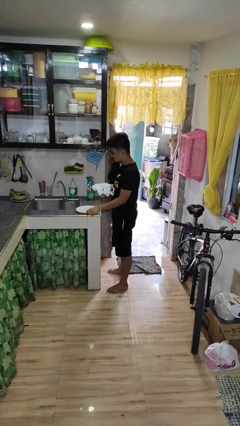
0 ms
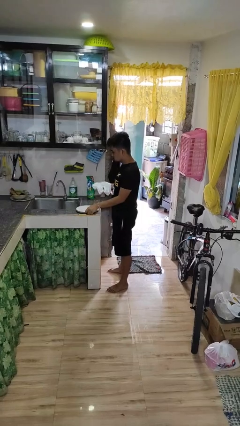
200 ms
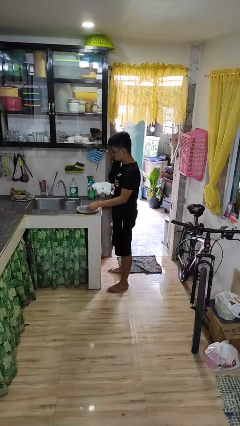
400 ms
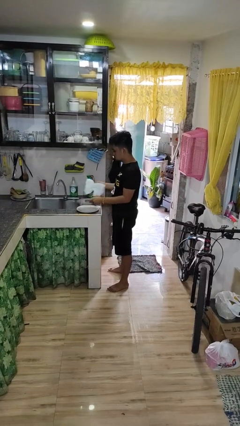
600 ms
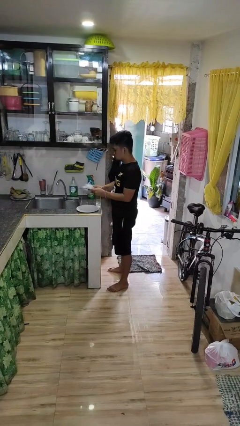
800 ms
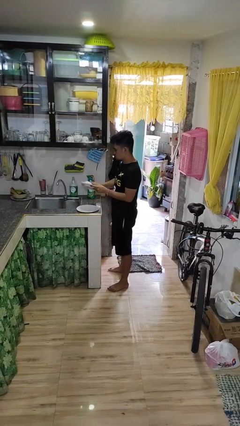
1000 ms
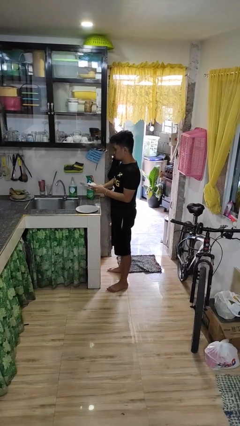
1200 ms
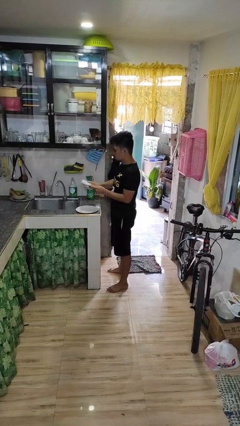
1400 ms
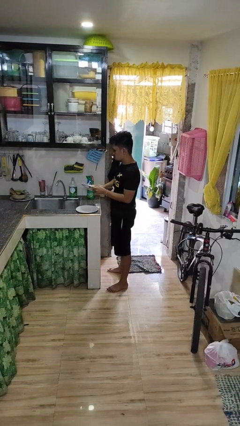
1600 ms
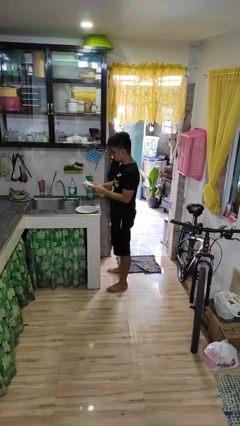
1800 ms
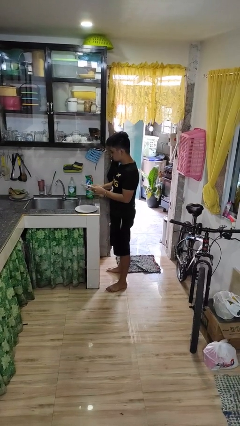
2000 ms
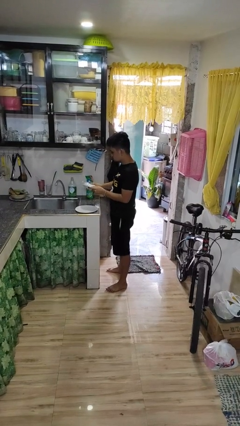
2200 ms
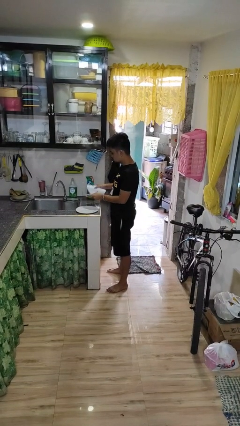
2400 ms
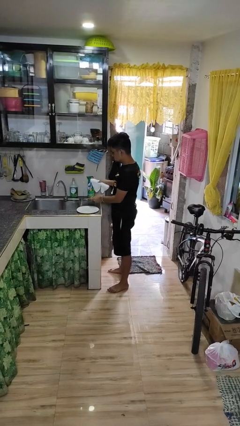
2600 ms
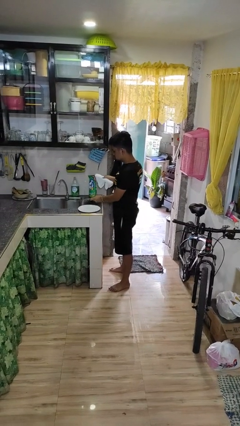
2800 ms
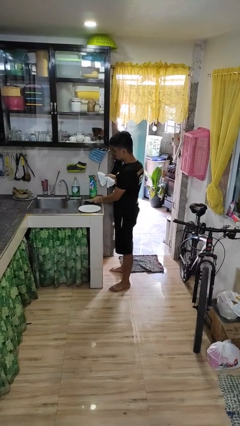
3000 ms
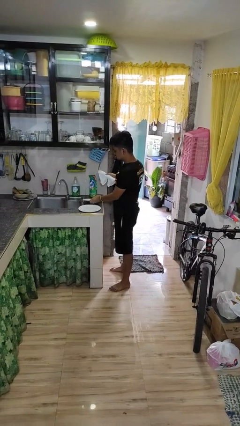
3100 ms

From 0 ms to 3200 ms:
person dries dish

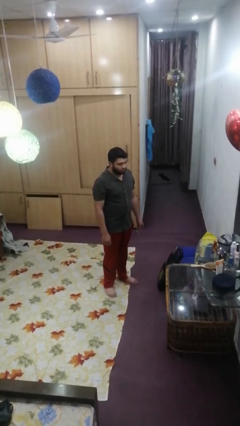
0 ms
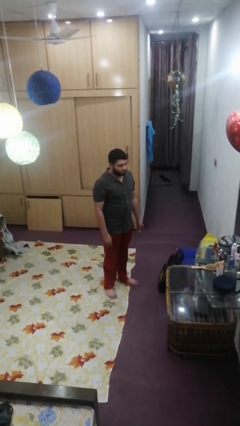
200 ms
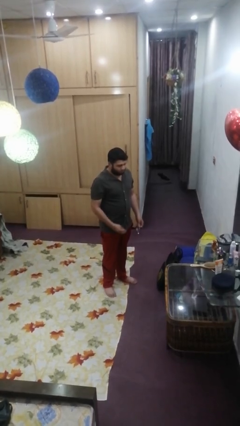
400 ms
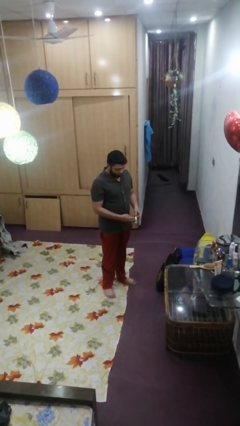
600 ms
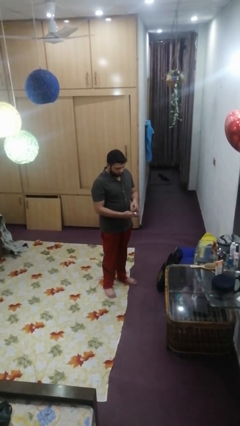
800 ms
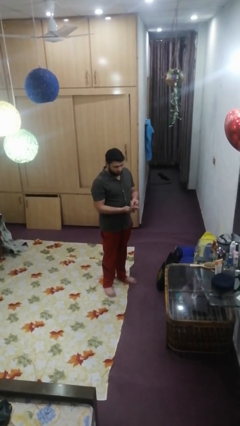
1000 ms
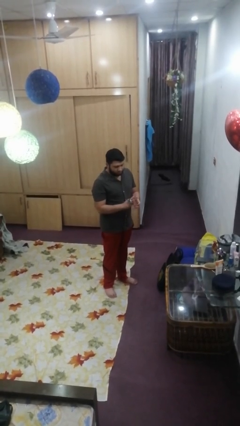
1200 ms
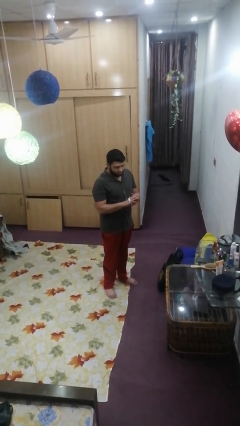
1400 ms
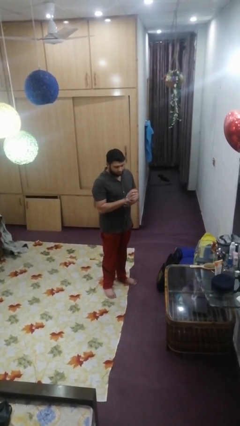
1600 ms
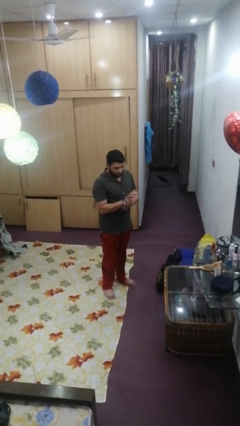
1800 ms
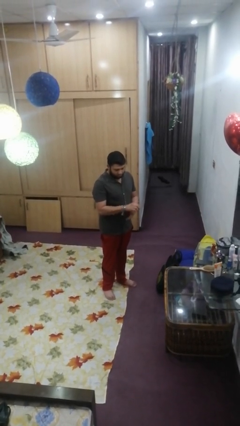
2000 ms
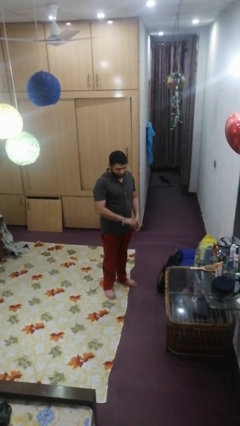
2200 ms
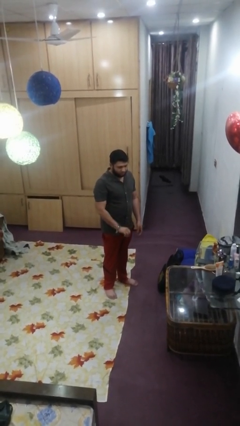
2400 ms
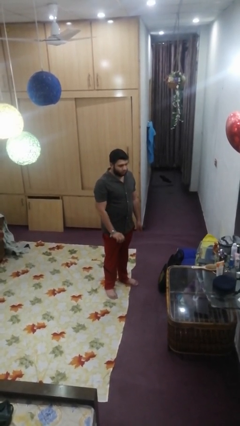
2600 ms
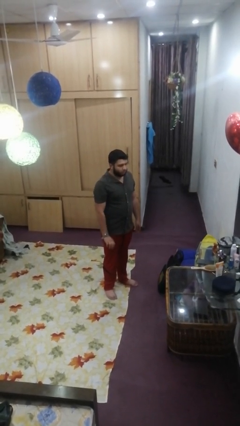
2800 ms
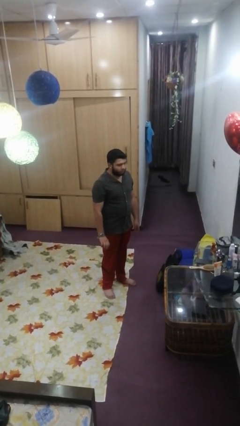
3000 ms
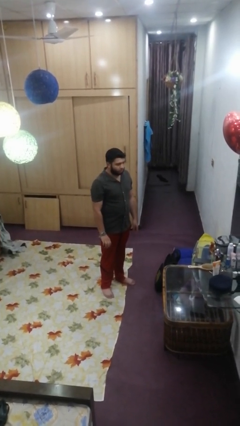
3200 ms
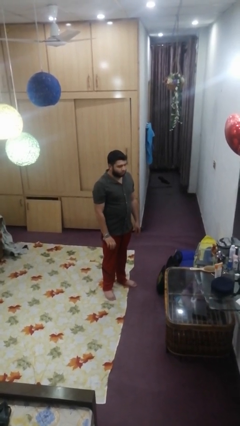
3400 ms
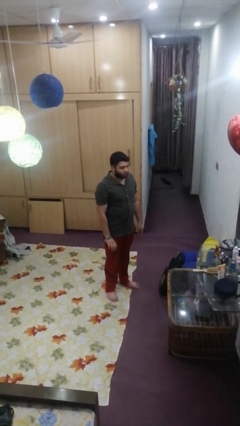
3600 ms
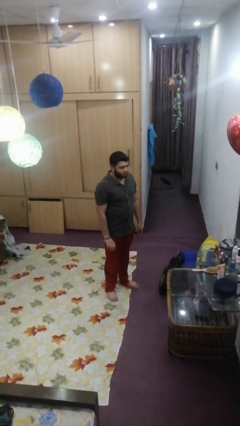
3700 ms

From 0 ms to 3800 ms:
person puts on wristwatch

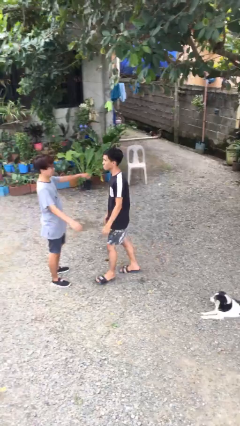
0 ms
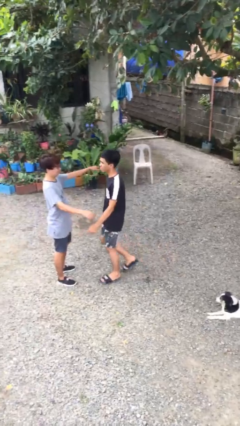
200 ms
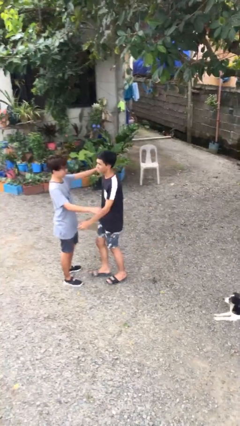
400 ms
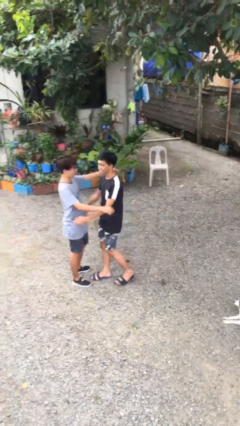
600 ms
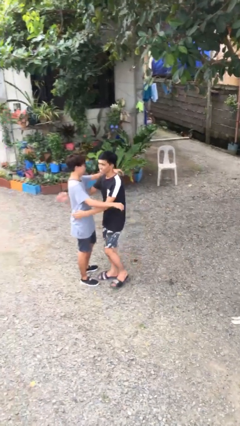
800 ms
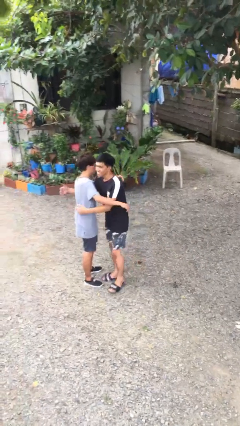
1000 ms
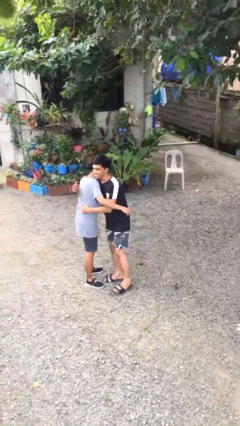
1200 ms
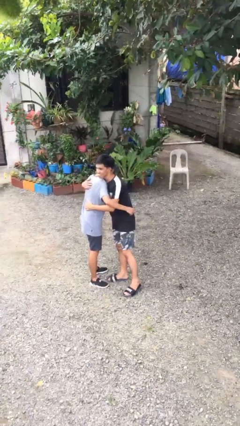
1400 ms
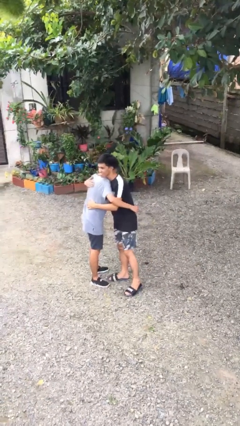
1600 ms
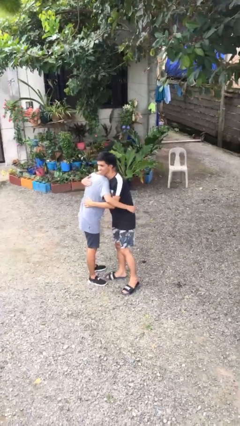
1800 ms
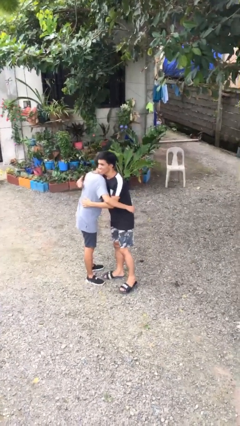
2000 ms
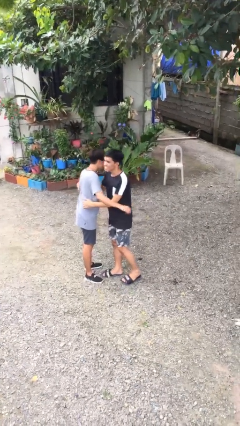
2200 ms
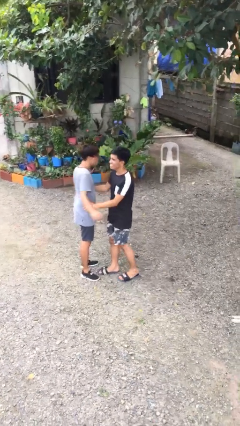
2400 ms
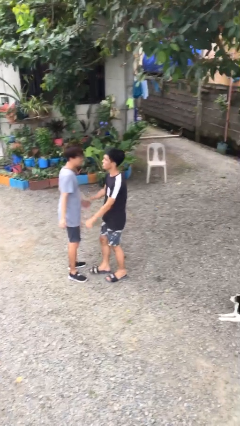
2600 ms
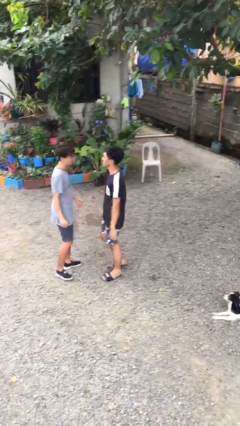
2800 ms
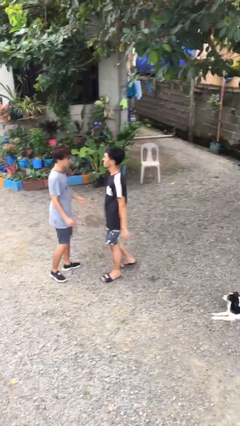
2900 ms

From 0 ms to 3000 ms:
person embraces person

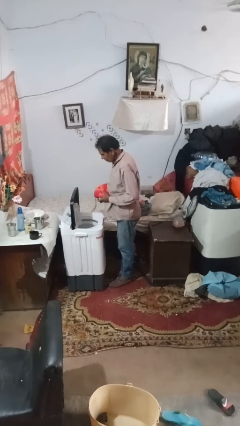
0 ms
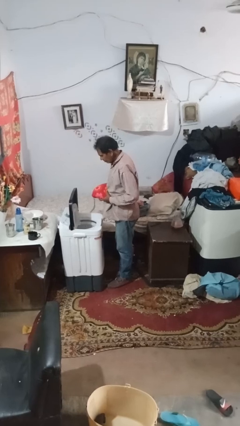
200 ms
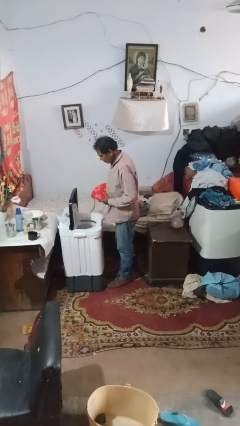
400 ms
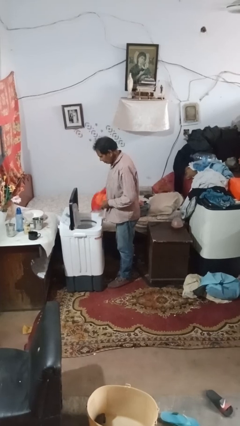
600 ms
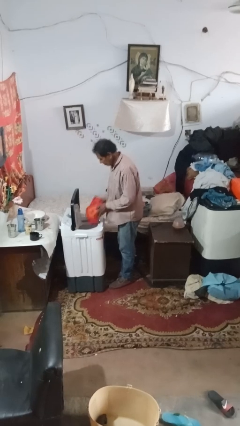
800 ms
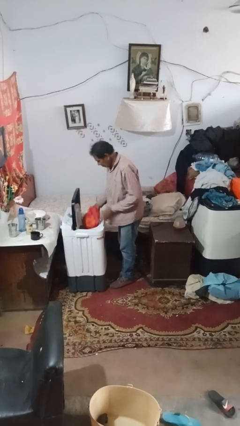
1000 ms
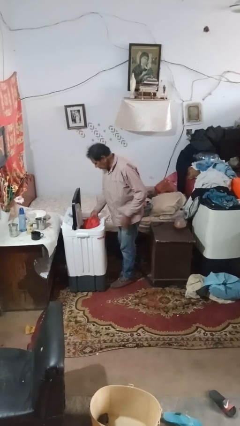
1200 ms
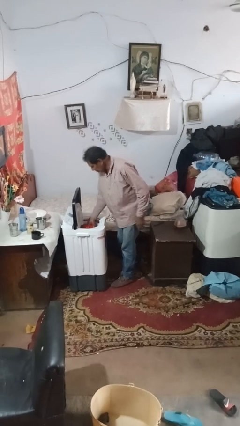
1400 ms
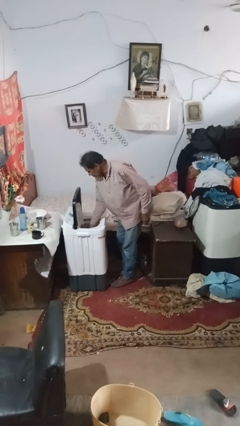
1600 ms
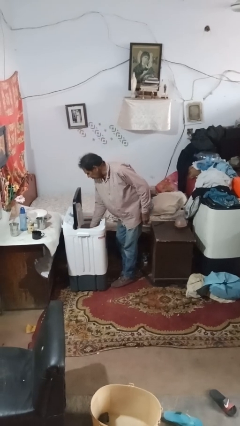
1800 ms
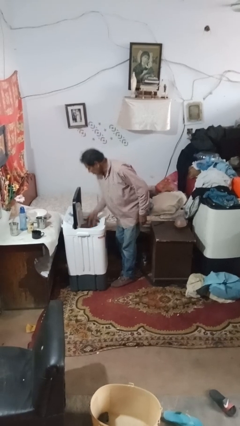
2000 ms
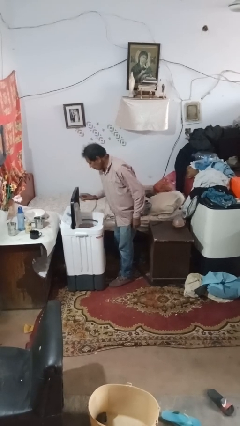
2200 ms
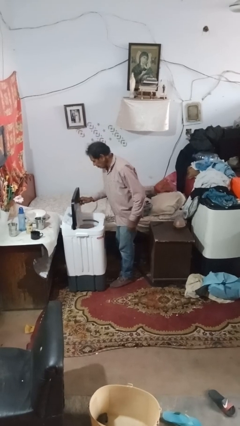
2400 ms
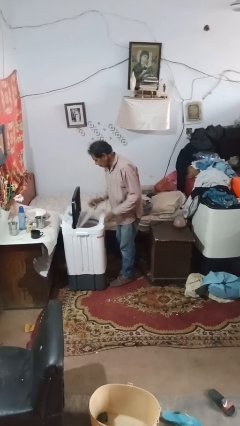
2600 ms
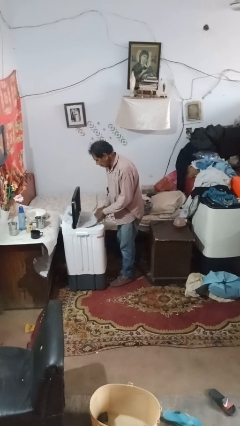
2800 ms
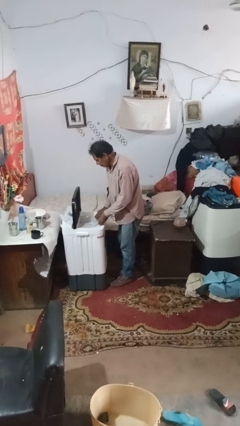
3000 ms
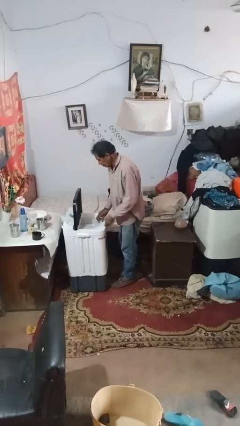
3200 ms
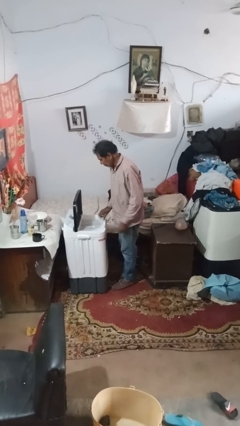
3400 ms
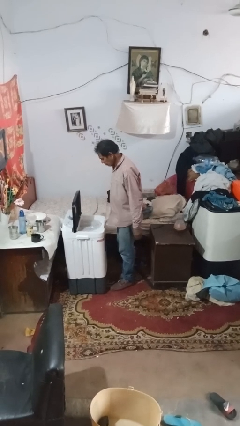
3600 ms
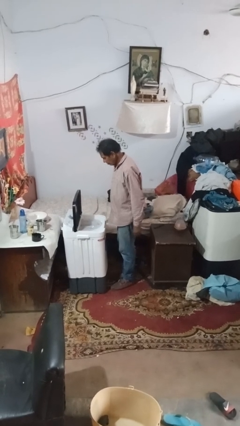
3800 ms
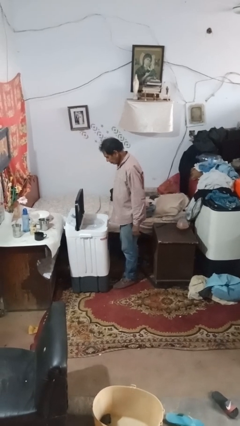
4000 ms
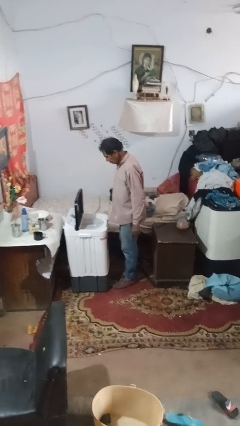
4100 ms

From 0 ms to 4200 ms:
person loads dryer

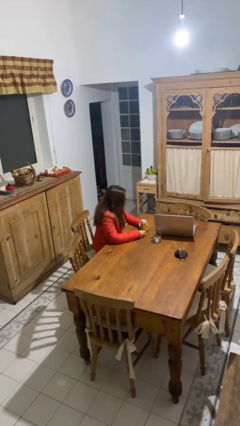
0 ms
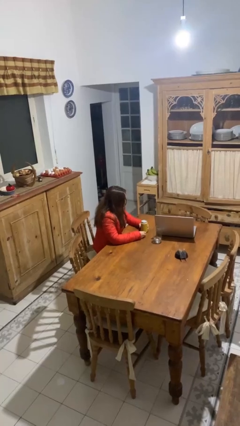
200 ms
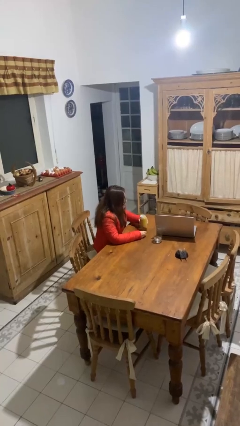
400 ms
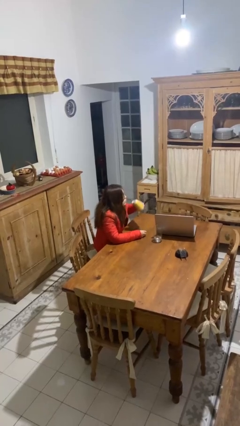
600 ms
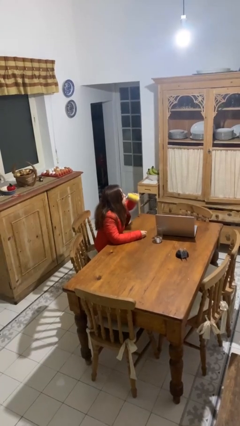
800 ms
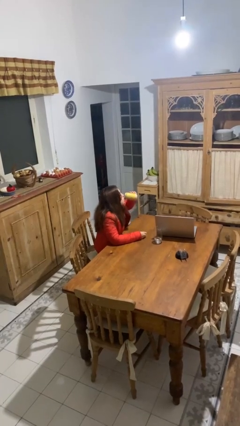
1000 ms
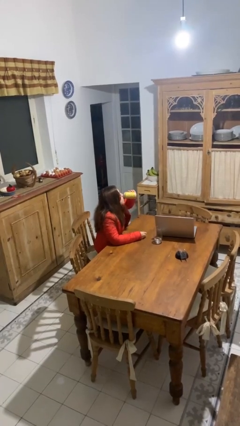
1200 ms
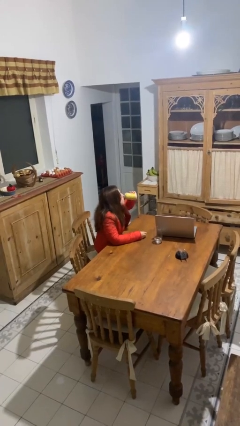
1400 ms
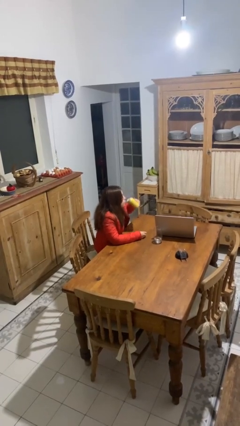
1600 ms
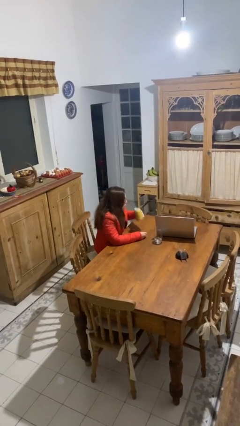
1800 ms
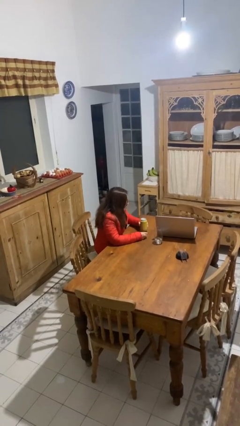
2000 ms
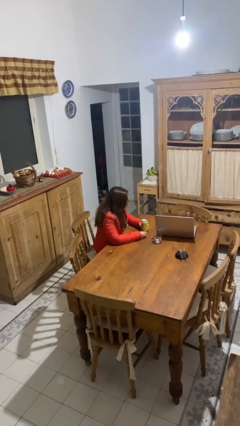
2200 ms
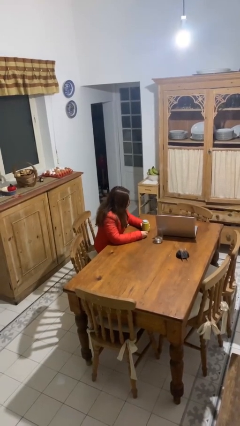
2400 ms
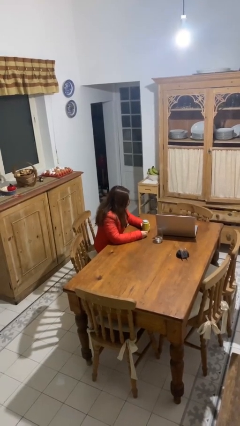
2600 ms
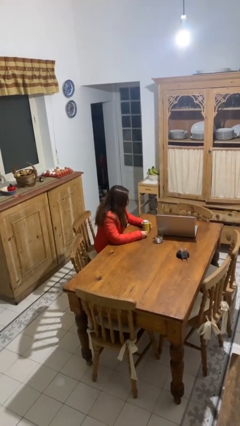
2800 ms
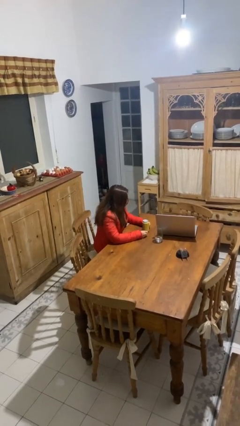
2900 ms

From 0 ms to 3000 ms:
person drinks from beverage can
